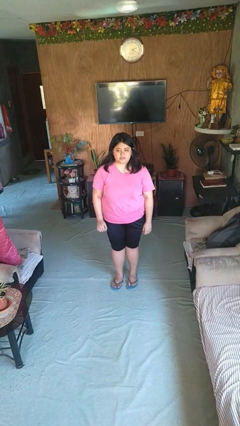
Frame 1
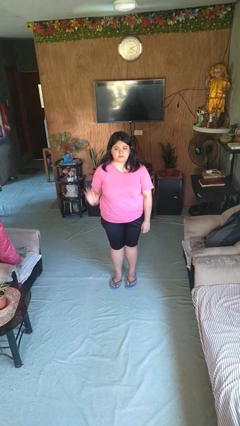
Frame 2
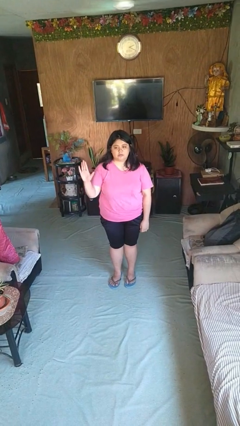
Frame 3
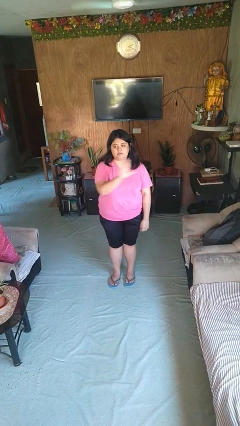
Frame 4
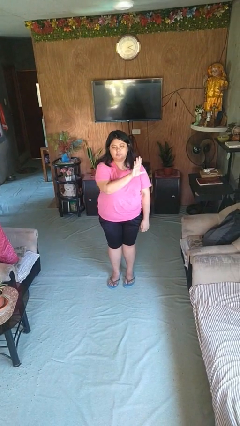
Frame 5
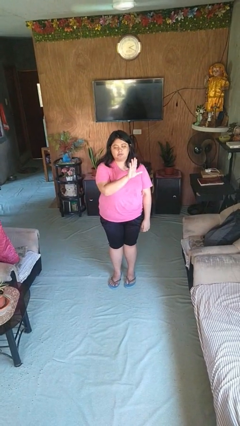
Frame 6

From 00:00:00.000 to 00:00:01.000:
person gestures swipe left

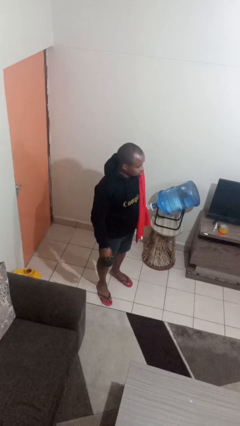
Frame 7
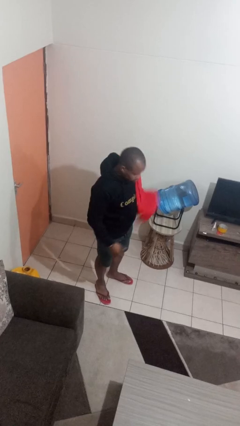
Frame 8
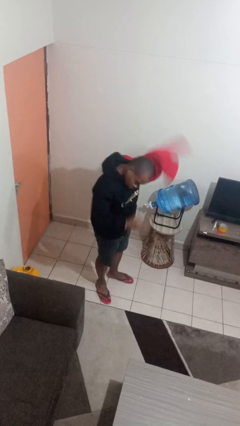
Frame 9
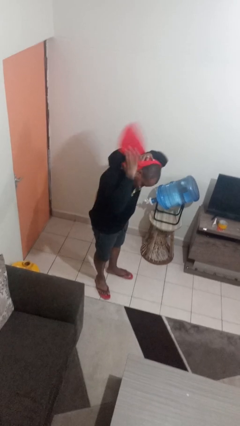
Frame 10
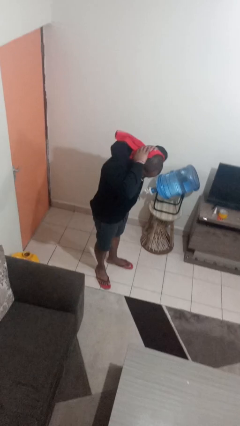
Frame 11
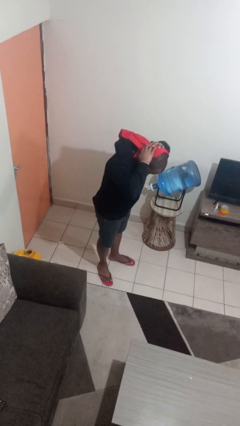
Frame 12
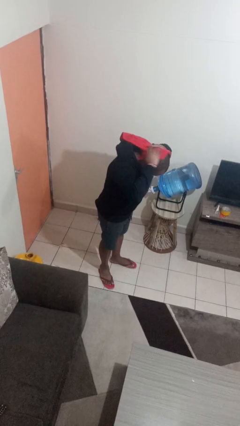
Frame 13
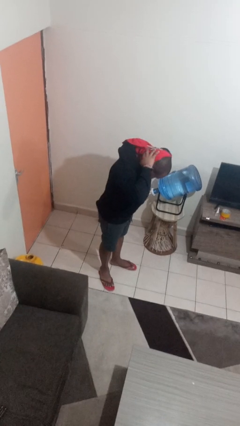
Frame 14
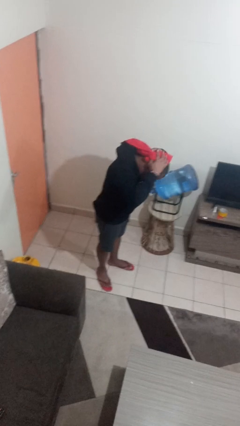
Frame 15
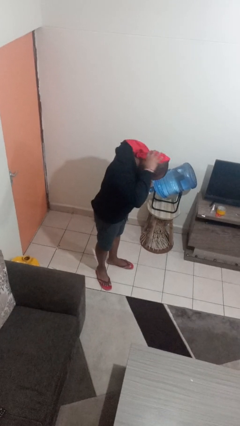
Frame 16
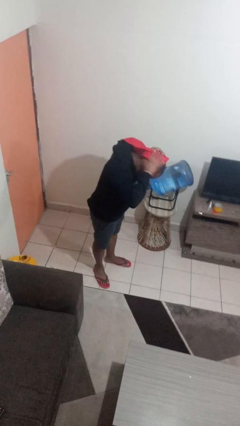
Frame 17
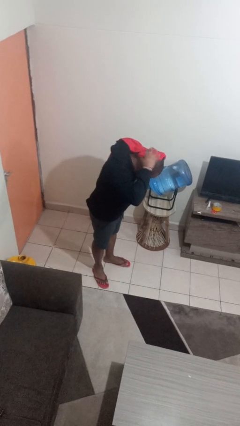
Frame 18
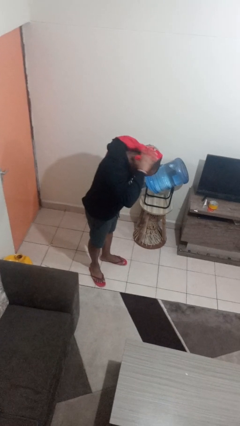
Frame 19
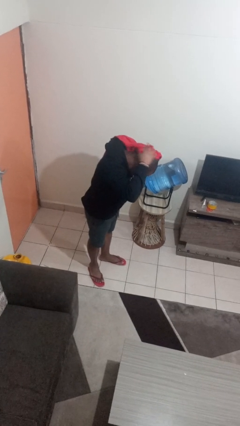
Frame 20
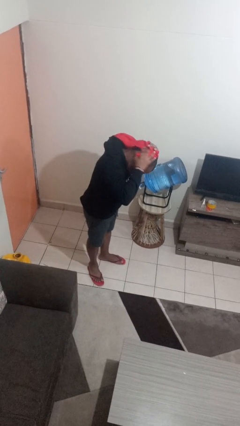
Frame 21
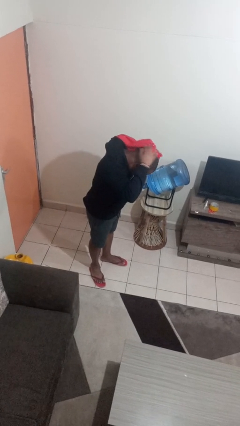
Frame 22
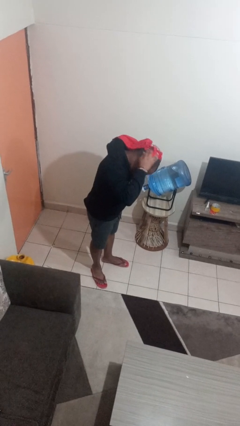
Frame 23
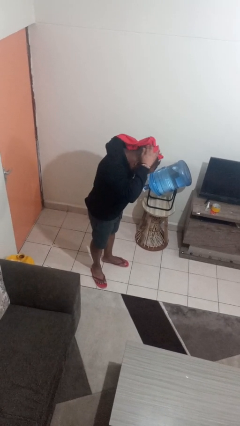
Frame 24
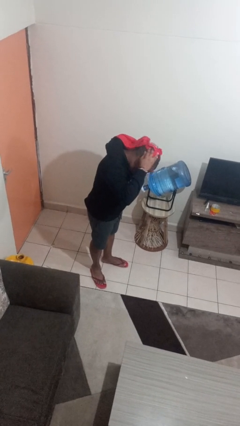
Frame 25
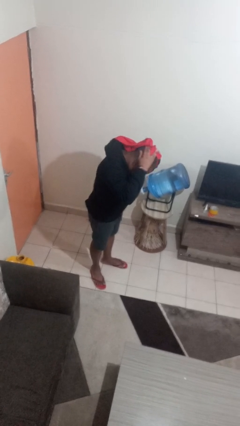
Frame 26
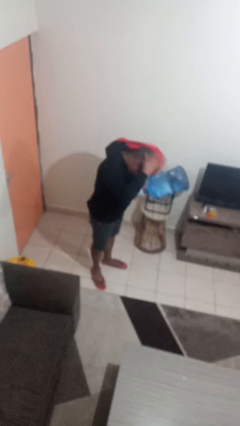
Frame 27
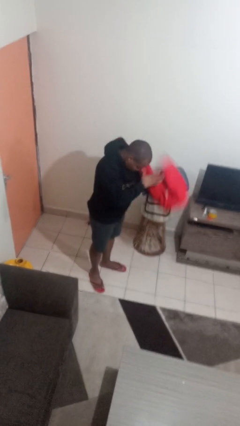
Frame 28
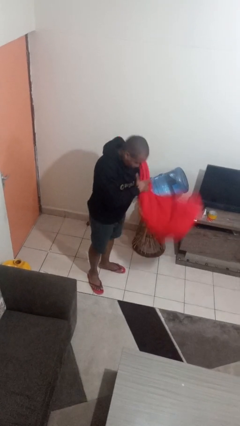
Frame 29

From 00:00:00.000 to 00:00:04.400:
person dries hair with towel

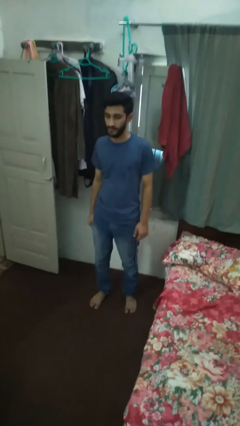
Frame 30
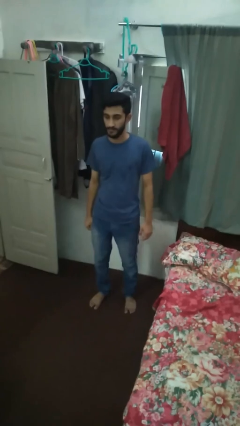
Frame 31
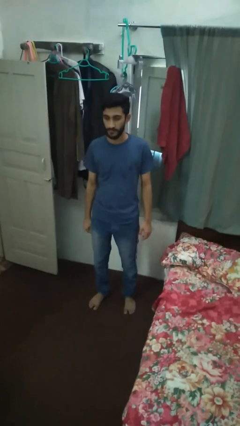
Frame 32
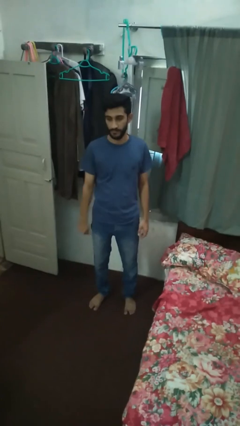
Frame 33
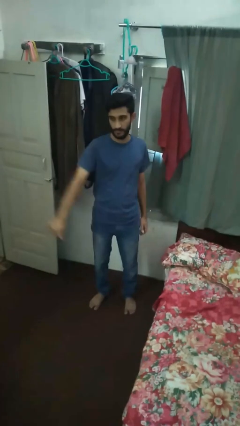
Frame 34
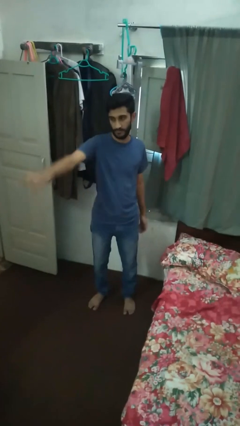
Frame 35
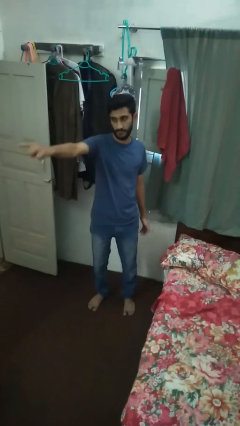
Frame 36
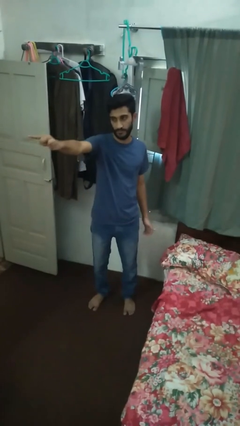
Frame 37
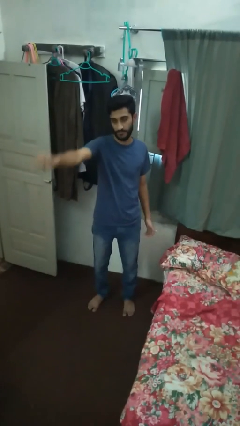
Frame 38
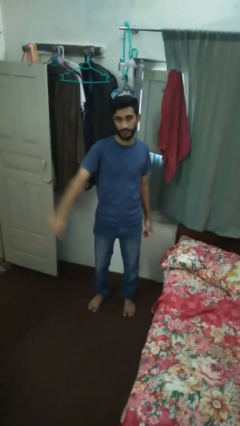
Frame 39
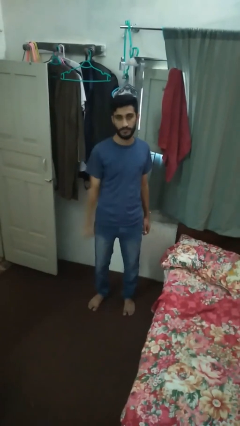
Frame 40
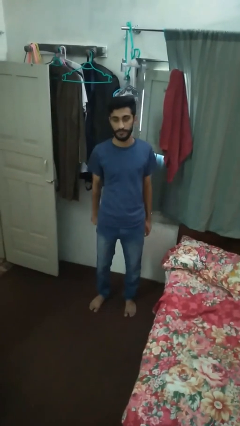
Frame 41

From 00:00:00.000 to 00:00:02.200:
person gestures hang loose

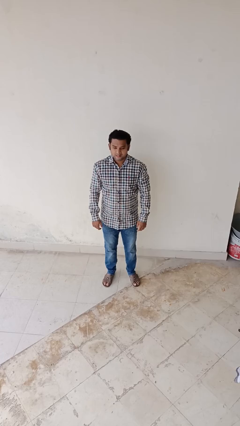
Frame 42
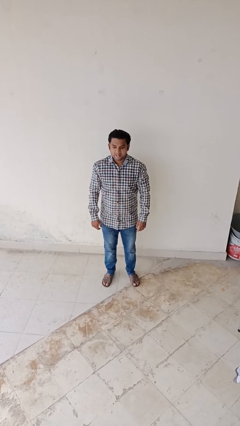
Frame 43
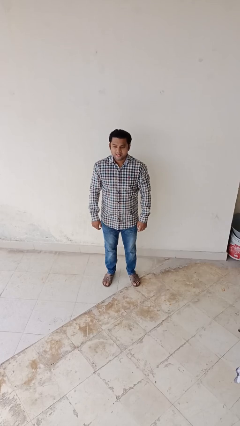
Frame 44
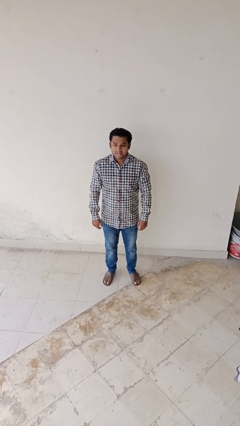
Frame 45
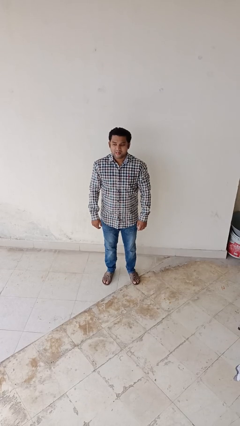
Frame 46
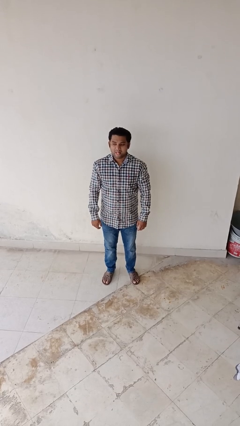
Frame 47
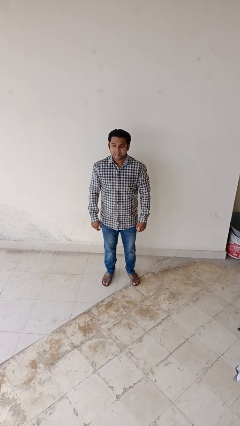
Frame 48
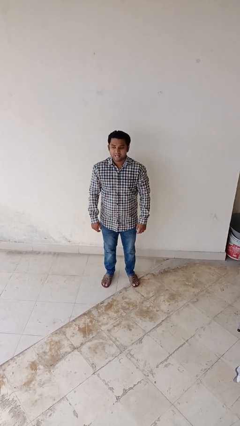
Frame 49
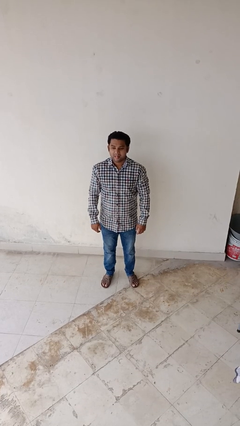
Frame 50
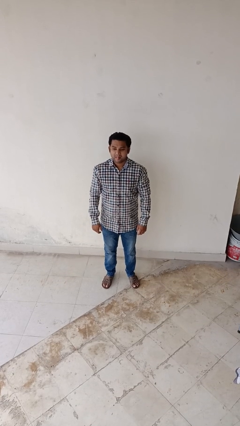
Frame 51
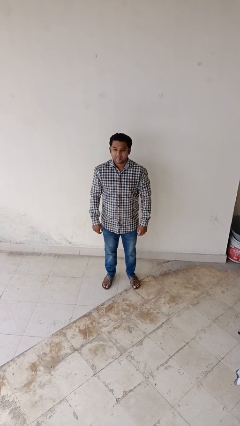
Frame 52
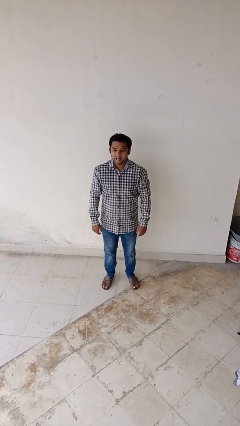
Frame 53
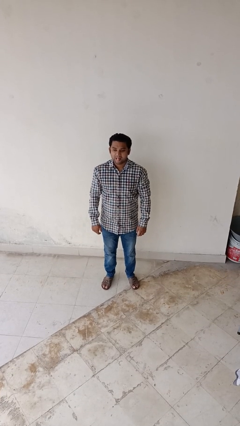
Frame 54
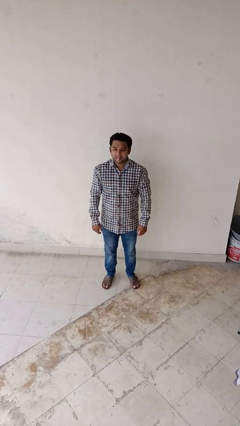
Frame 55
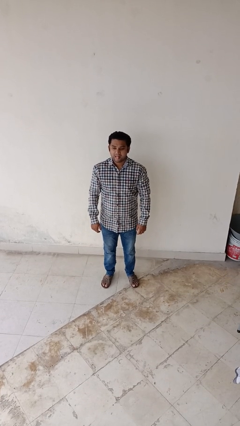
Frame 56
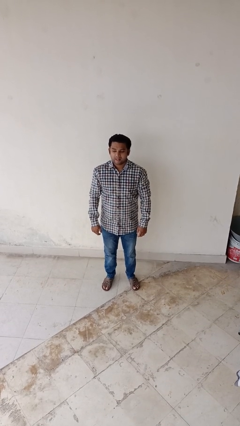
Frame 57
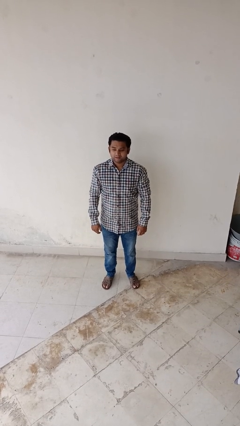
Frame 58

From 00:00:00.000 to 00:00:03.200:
person sticks out tongue

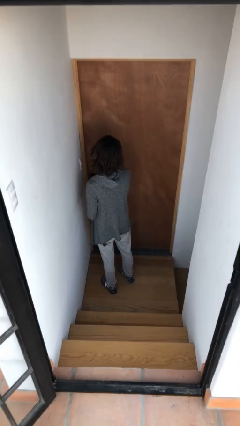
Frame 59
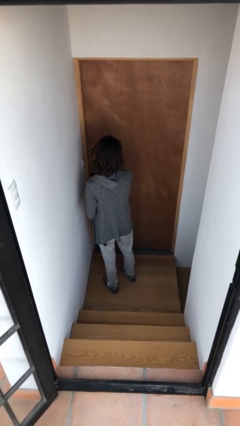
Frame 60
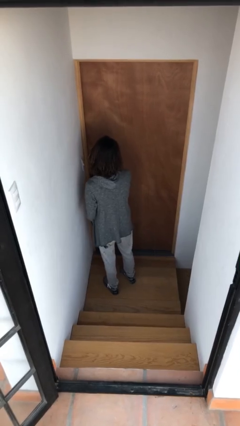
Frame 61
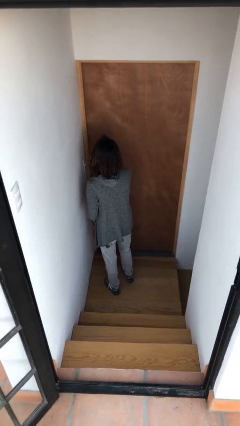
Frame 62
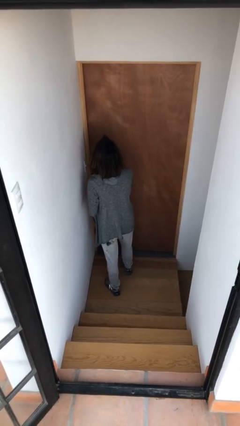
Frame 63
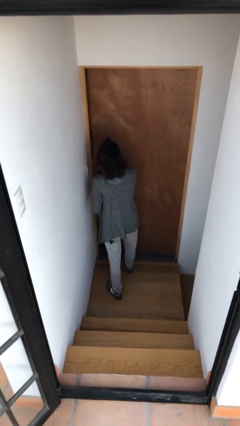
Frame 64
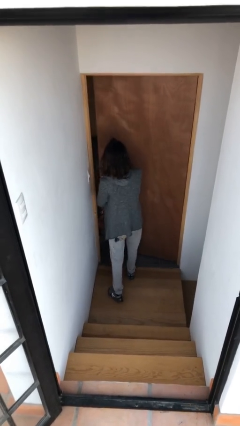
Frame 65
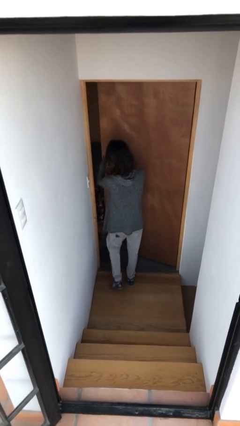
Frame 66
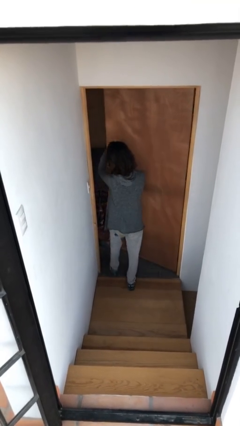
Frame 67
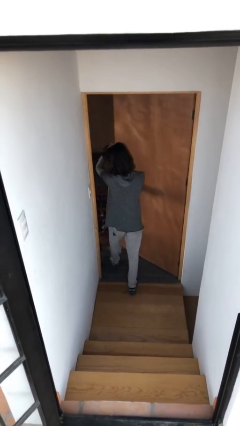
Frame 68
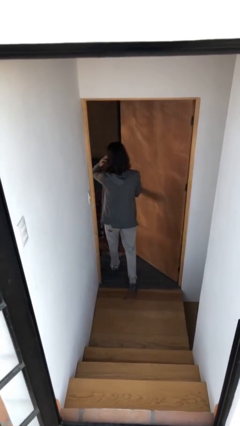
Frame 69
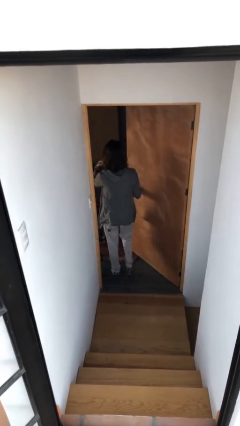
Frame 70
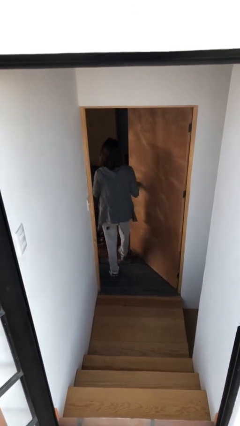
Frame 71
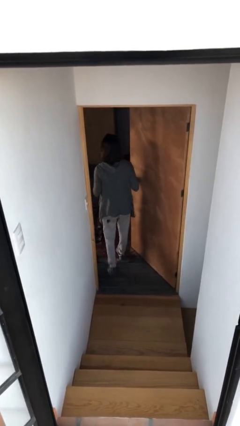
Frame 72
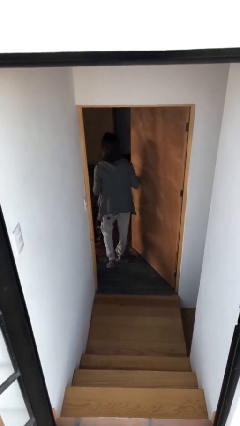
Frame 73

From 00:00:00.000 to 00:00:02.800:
person opens facility door

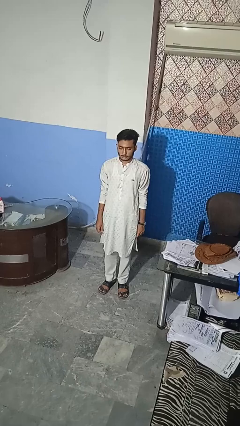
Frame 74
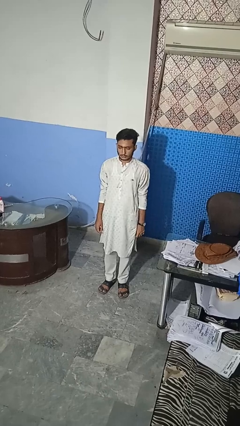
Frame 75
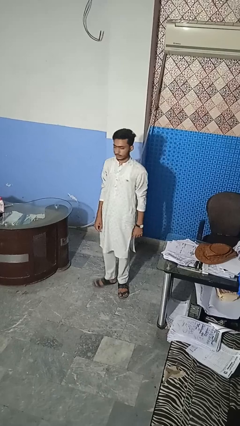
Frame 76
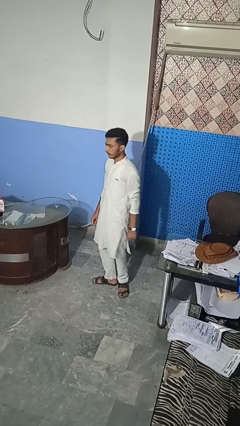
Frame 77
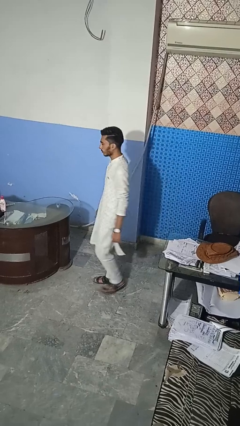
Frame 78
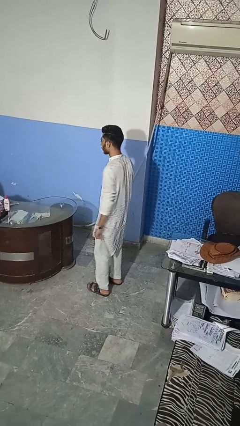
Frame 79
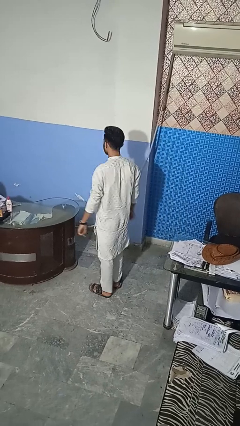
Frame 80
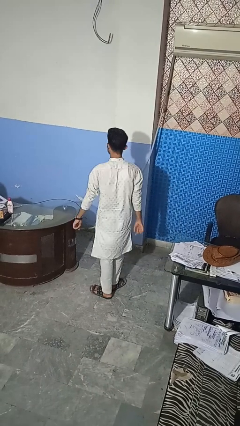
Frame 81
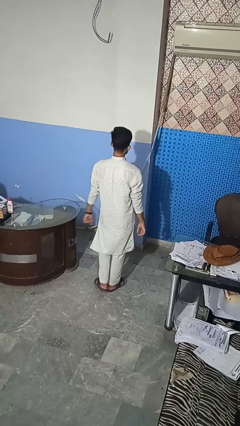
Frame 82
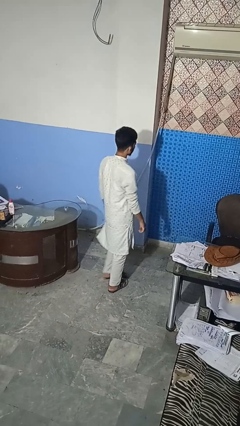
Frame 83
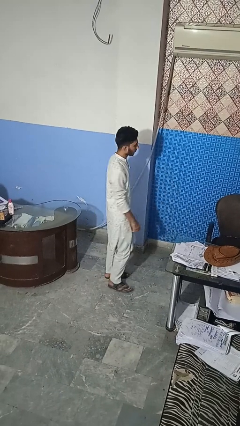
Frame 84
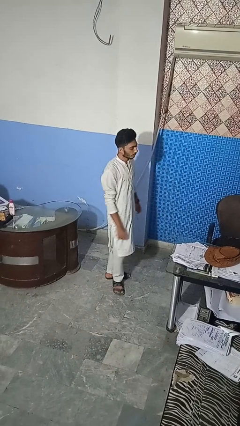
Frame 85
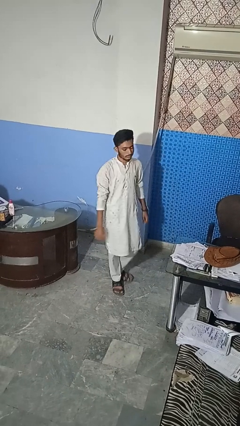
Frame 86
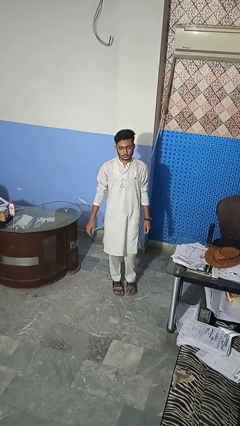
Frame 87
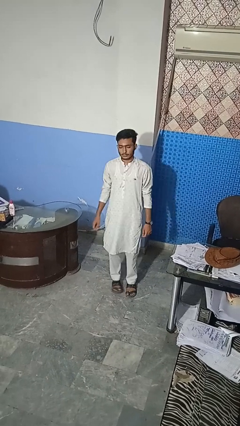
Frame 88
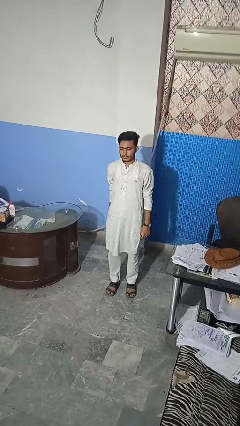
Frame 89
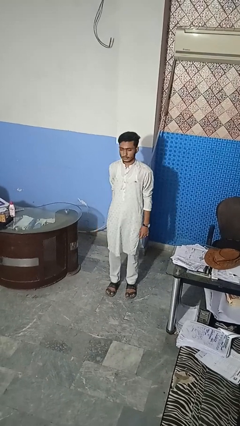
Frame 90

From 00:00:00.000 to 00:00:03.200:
person twirls

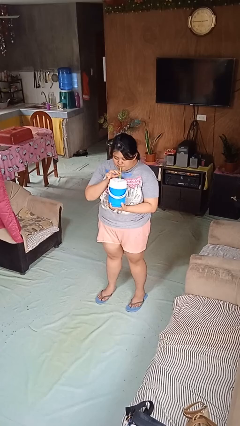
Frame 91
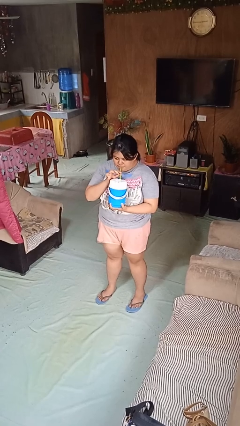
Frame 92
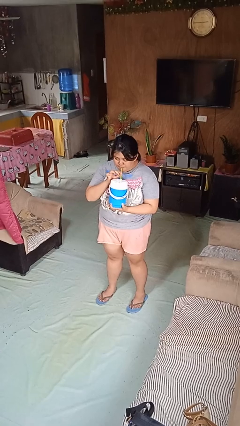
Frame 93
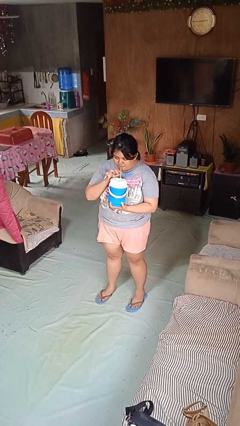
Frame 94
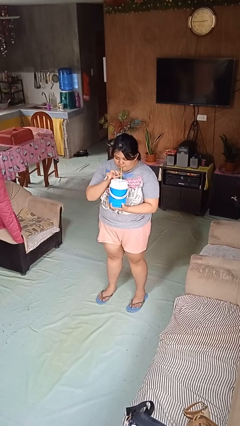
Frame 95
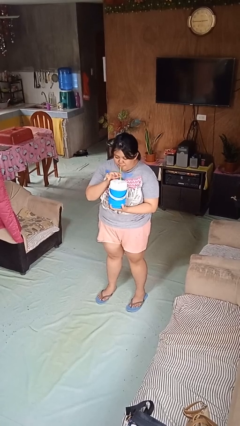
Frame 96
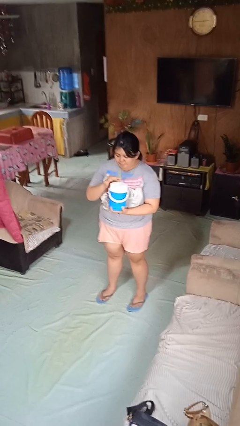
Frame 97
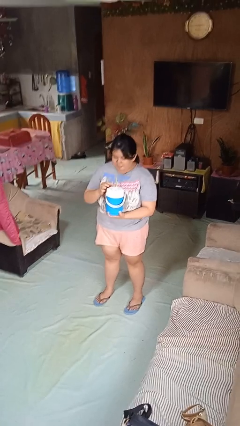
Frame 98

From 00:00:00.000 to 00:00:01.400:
person drinks from straw
